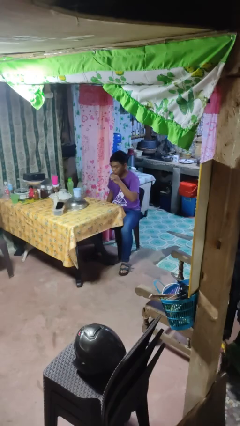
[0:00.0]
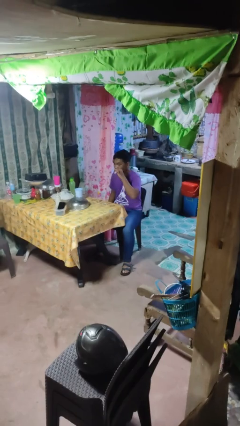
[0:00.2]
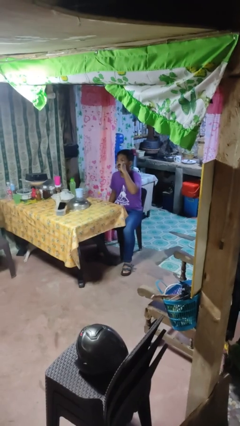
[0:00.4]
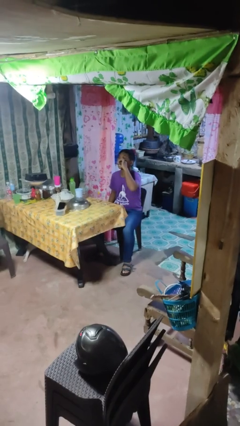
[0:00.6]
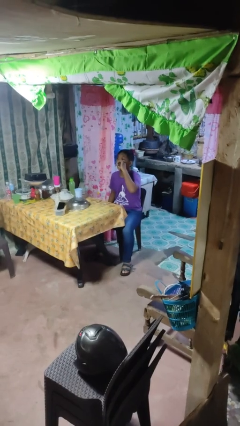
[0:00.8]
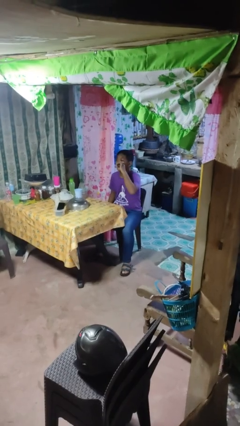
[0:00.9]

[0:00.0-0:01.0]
person drinks from shotglass

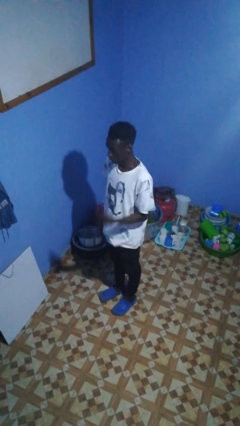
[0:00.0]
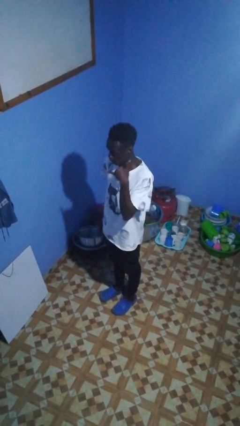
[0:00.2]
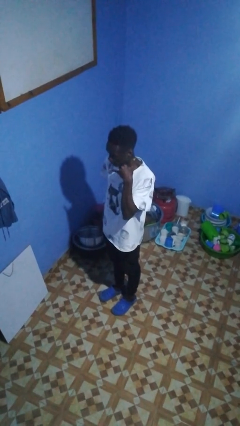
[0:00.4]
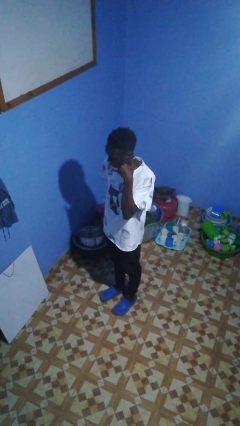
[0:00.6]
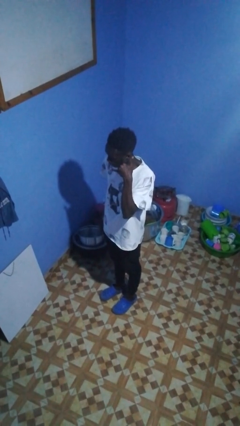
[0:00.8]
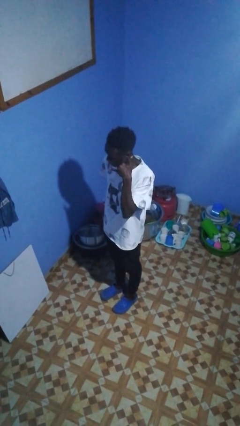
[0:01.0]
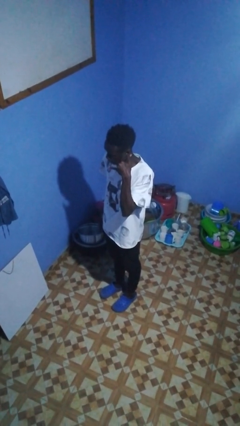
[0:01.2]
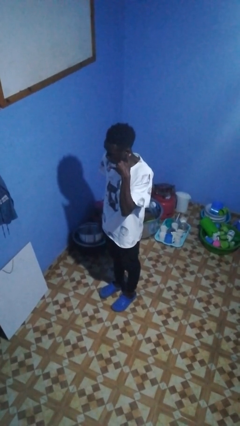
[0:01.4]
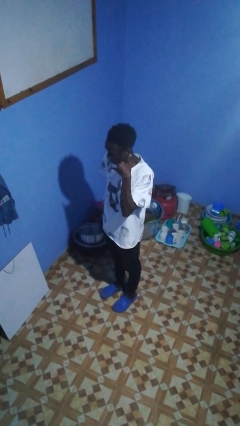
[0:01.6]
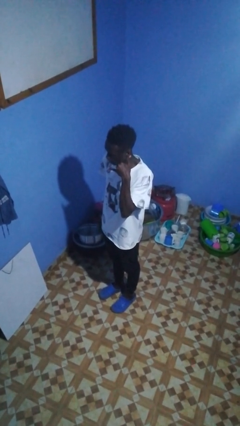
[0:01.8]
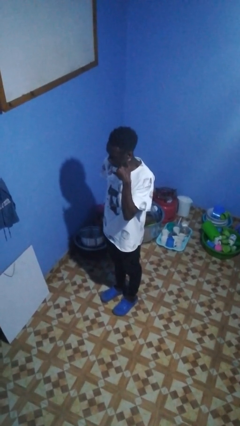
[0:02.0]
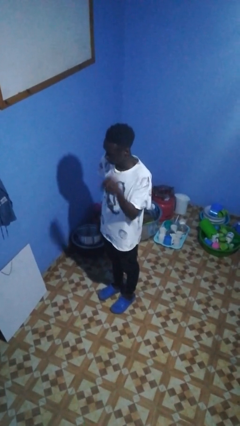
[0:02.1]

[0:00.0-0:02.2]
person gestures call me

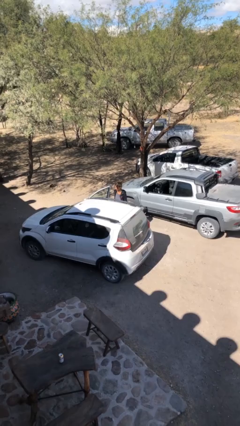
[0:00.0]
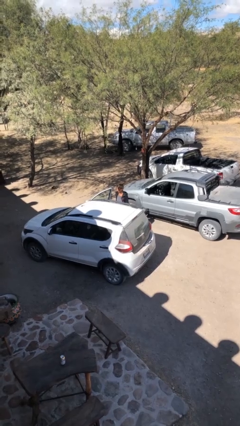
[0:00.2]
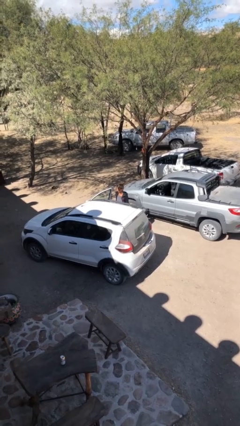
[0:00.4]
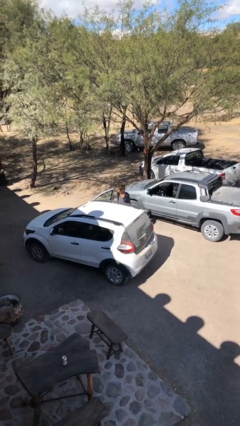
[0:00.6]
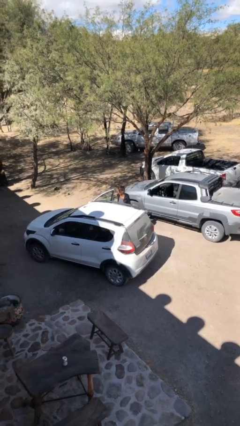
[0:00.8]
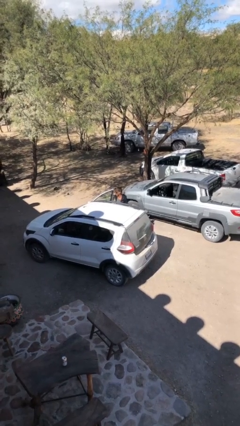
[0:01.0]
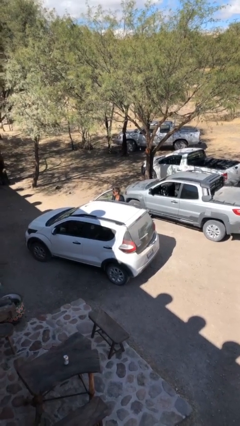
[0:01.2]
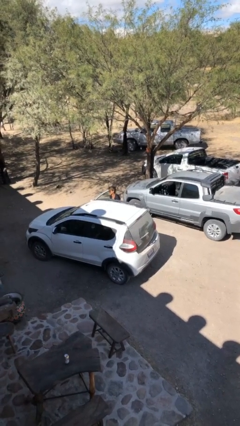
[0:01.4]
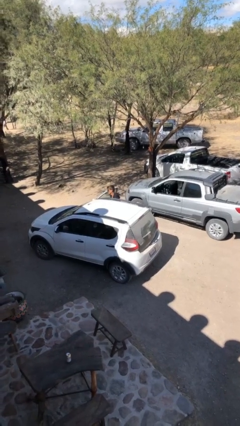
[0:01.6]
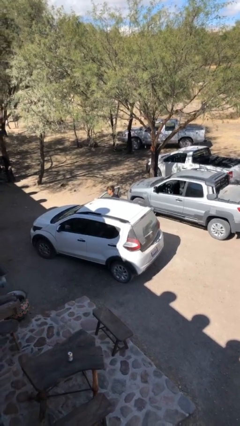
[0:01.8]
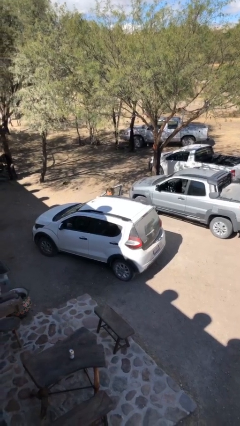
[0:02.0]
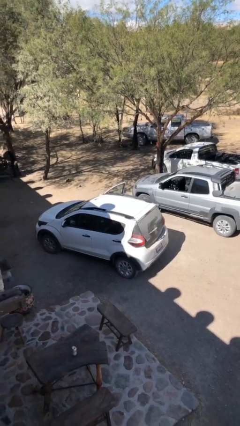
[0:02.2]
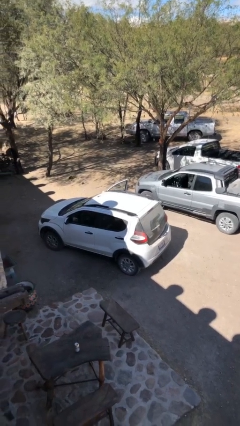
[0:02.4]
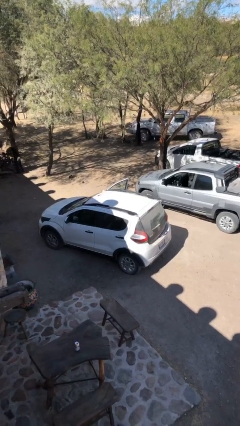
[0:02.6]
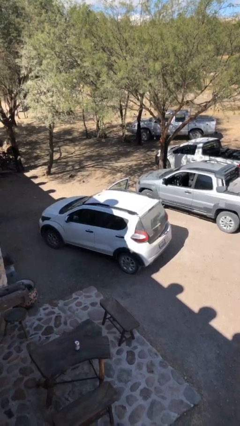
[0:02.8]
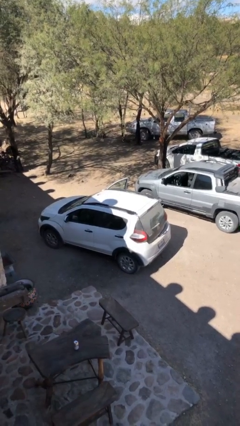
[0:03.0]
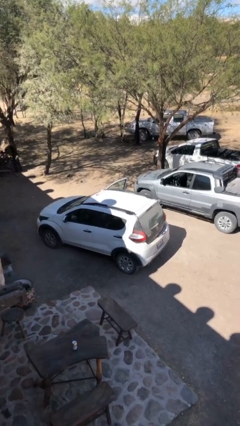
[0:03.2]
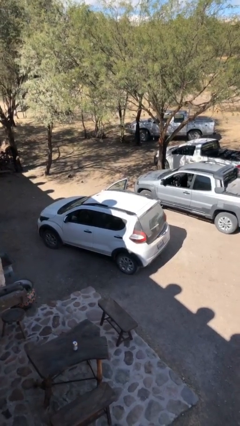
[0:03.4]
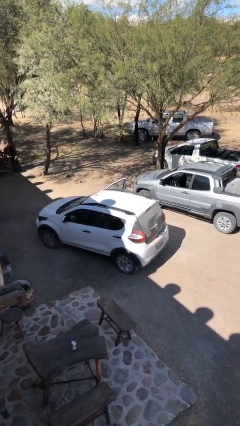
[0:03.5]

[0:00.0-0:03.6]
person enters car

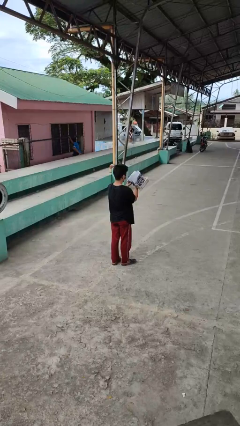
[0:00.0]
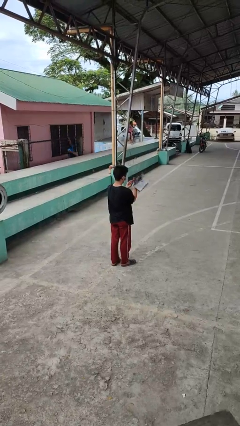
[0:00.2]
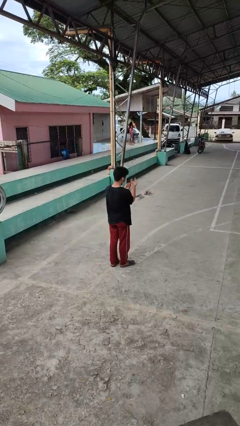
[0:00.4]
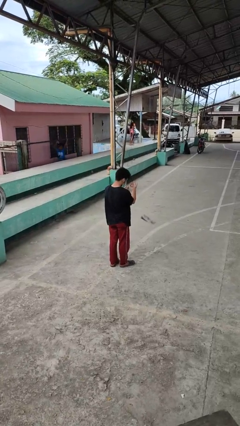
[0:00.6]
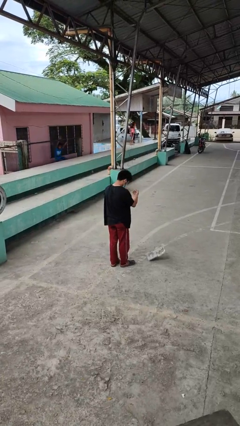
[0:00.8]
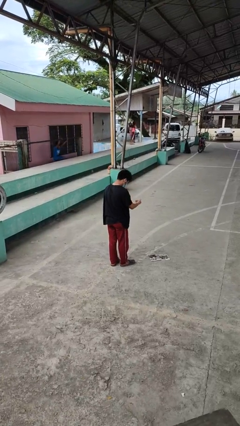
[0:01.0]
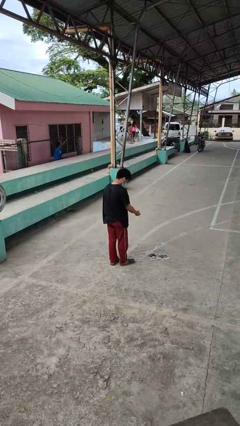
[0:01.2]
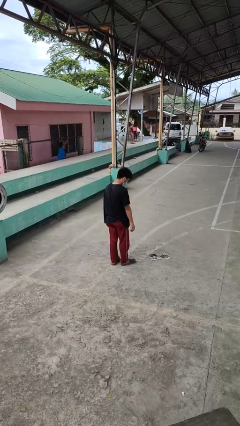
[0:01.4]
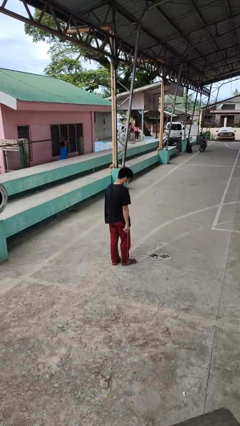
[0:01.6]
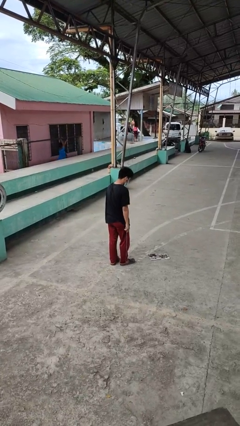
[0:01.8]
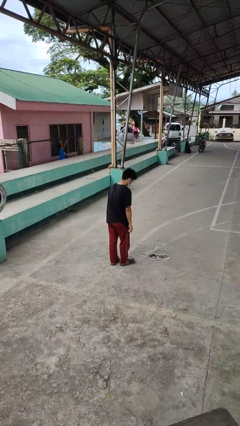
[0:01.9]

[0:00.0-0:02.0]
person drops object

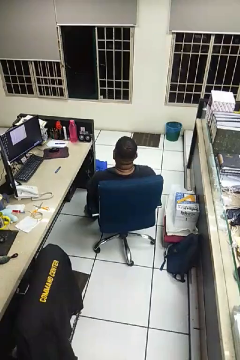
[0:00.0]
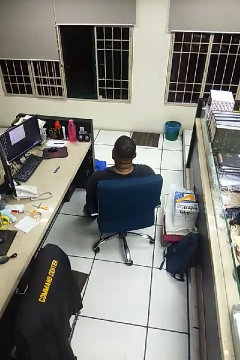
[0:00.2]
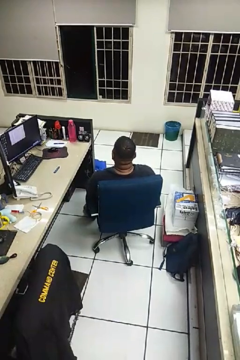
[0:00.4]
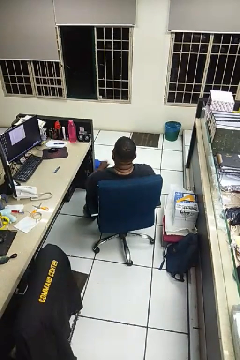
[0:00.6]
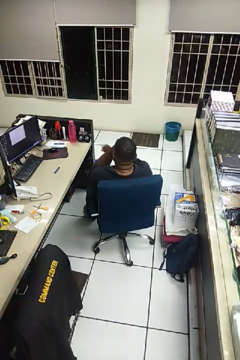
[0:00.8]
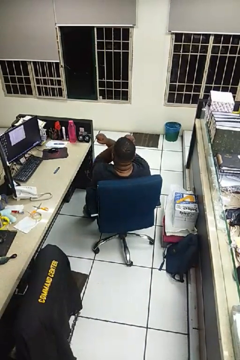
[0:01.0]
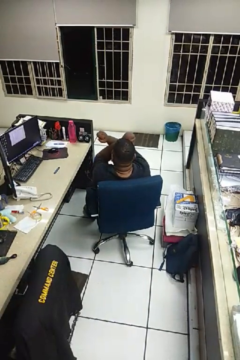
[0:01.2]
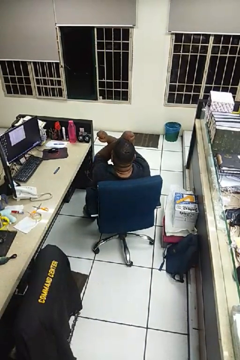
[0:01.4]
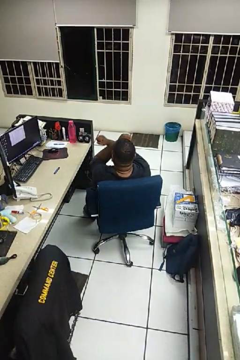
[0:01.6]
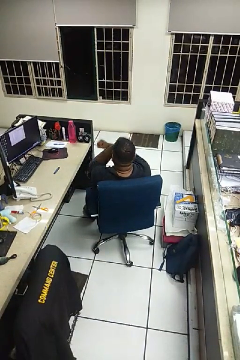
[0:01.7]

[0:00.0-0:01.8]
person gestures arms x

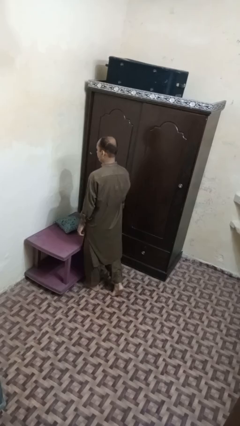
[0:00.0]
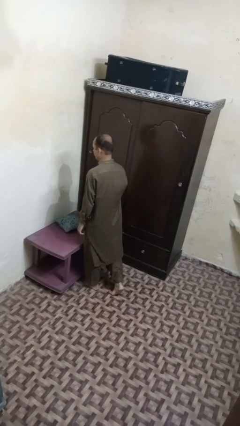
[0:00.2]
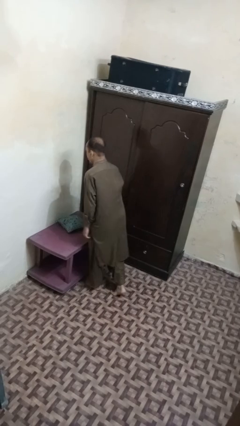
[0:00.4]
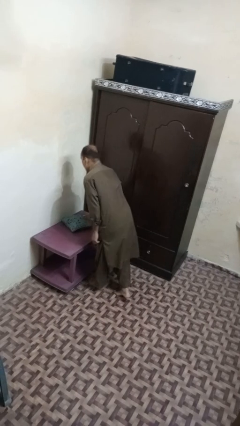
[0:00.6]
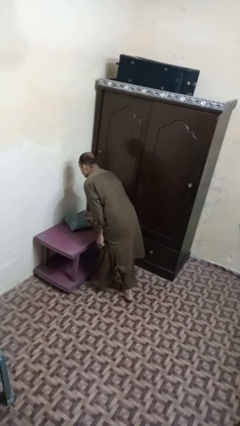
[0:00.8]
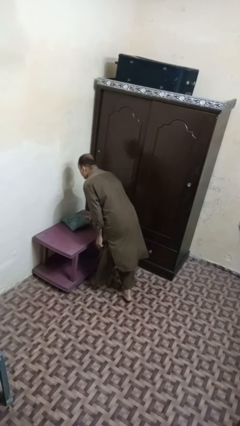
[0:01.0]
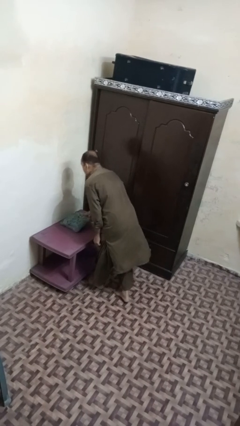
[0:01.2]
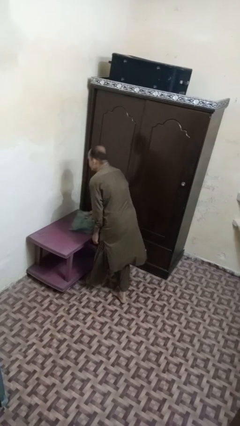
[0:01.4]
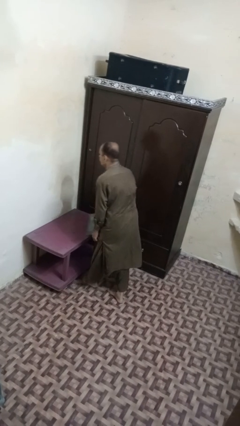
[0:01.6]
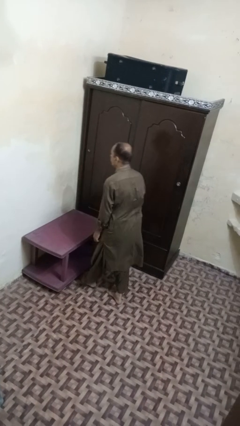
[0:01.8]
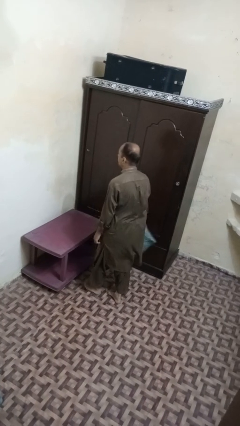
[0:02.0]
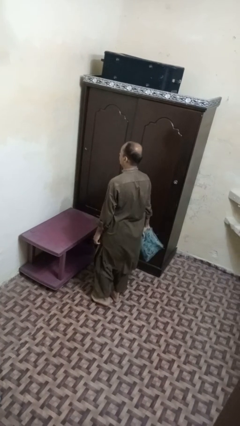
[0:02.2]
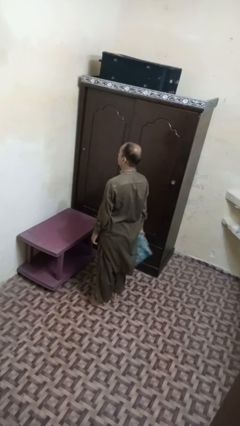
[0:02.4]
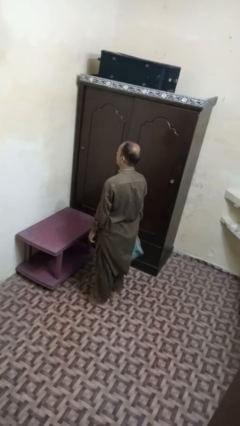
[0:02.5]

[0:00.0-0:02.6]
person picks up object from table

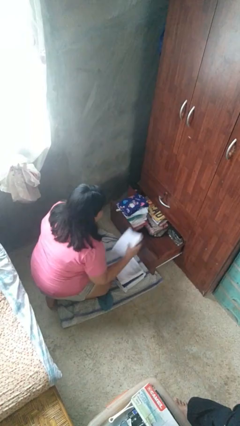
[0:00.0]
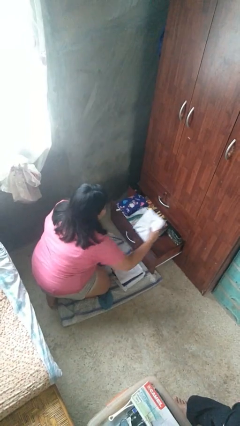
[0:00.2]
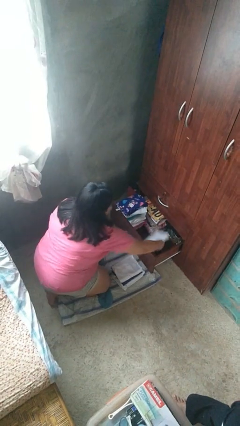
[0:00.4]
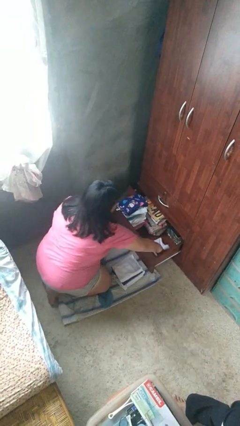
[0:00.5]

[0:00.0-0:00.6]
person puts clothes into dresser

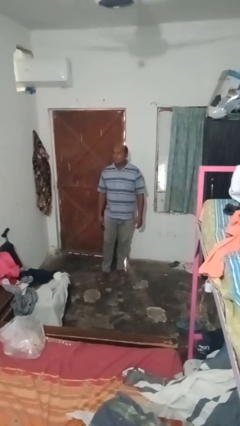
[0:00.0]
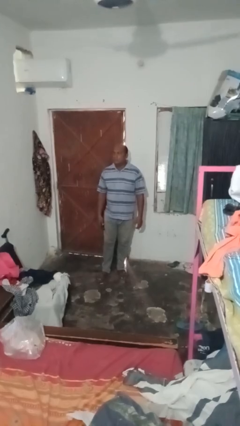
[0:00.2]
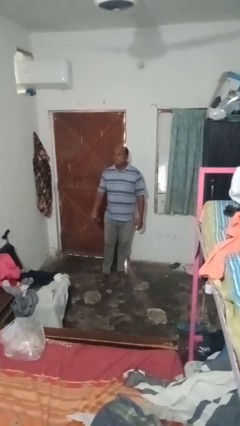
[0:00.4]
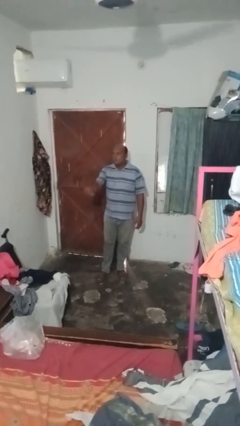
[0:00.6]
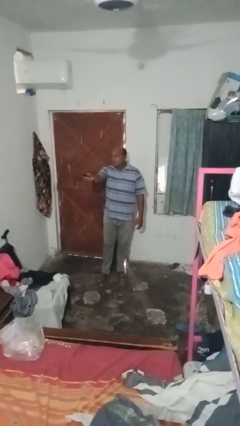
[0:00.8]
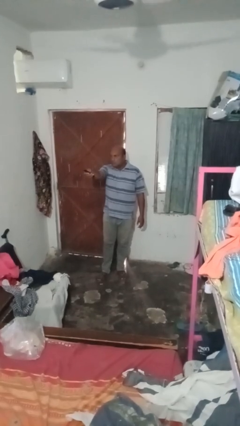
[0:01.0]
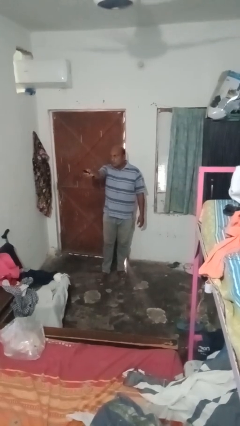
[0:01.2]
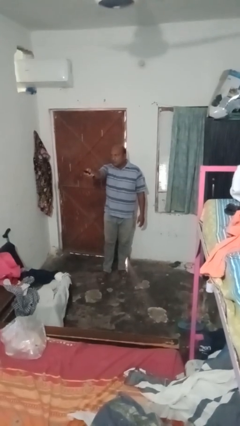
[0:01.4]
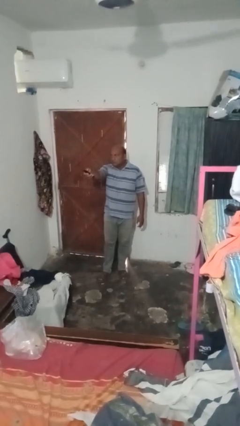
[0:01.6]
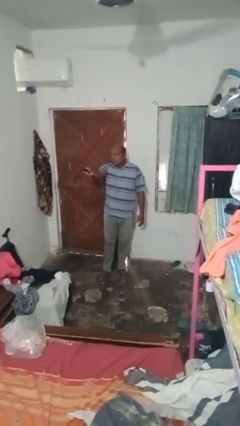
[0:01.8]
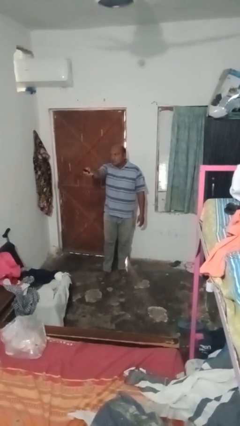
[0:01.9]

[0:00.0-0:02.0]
person uses television remote

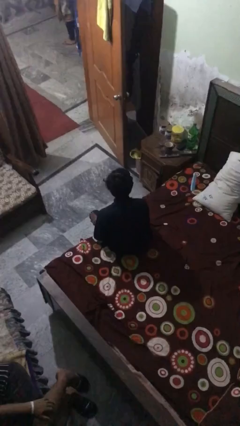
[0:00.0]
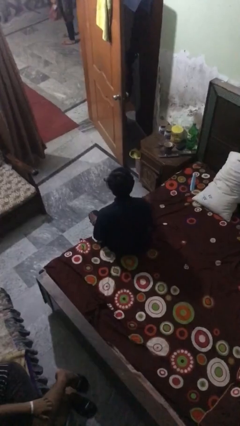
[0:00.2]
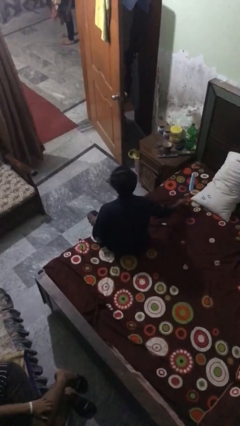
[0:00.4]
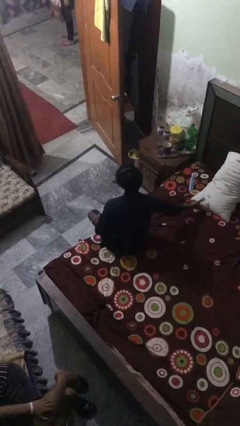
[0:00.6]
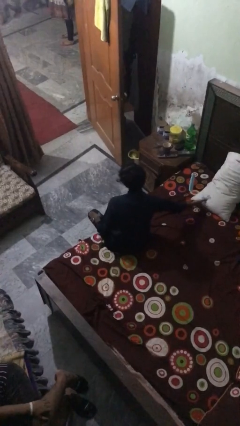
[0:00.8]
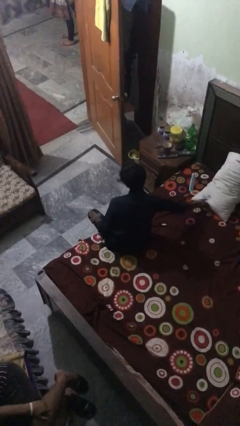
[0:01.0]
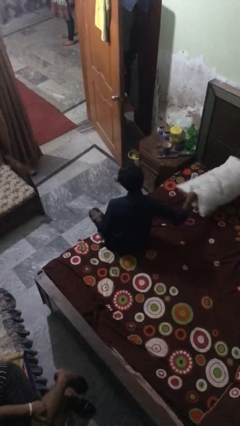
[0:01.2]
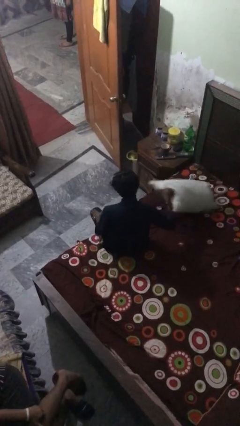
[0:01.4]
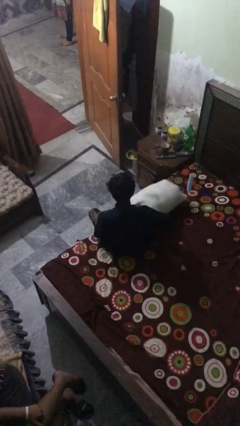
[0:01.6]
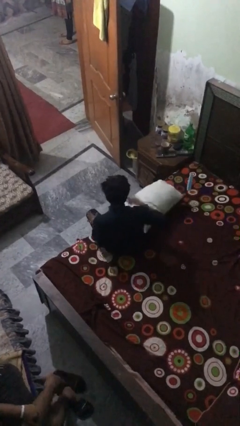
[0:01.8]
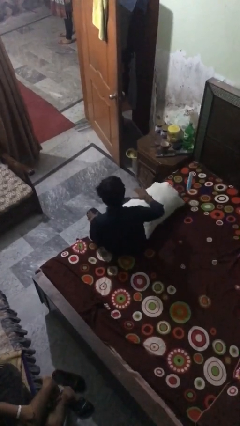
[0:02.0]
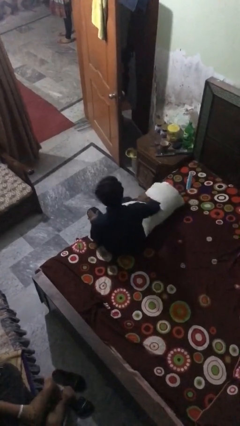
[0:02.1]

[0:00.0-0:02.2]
person picks up object from bed
